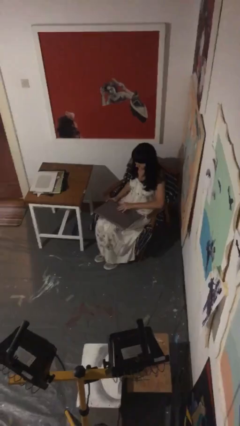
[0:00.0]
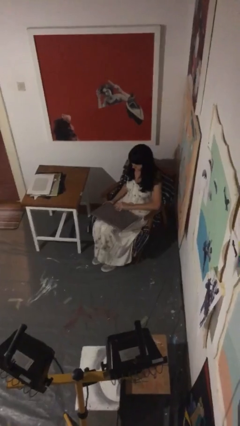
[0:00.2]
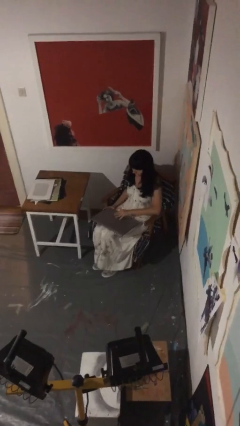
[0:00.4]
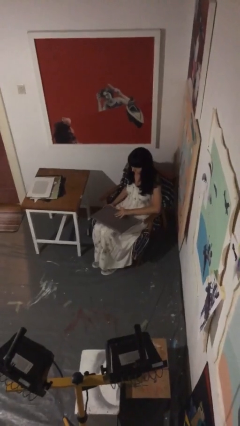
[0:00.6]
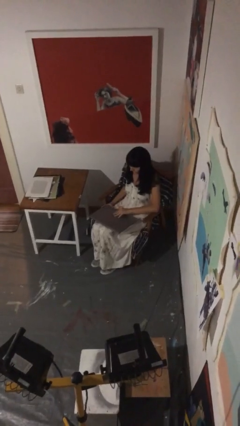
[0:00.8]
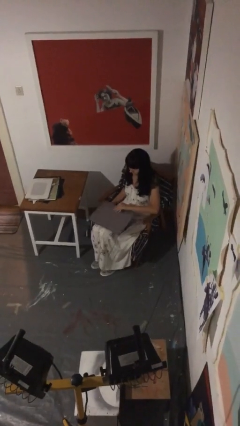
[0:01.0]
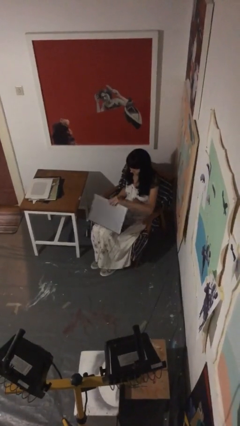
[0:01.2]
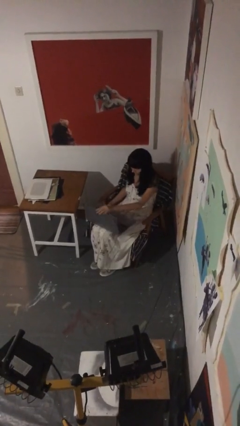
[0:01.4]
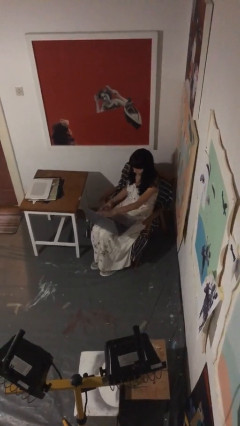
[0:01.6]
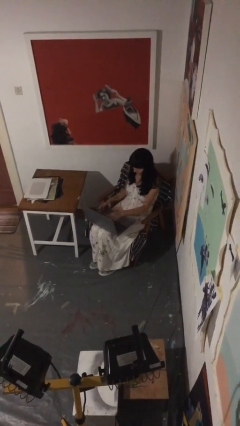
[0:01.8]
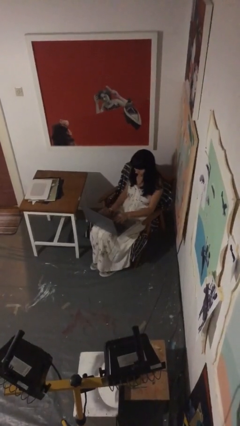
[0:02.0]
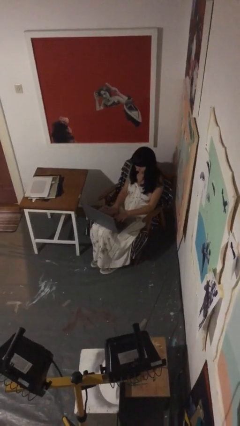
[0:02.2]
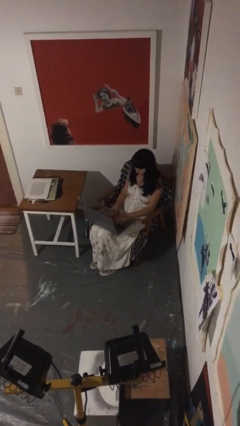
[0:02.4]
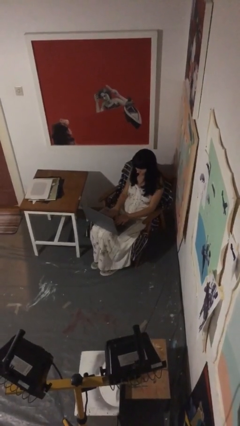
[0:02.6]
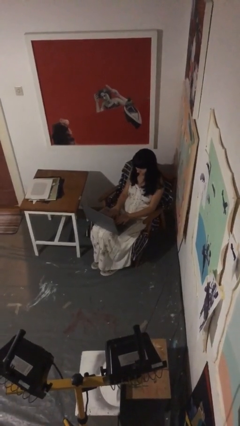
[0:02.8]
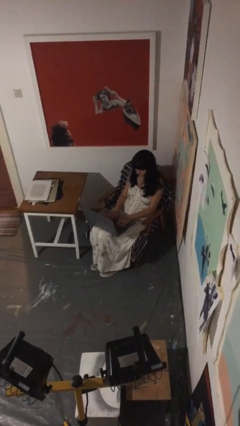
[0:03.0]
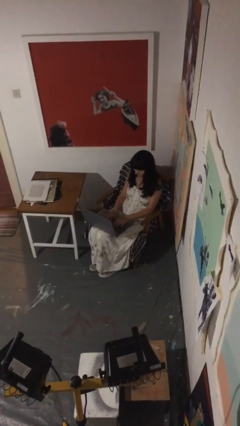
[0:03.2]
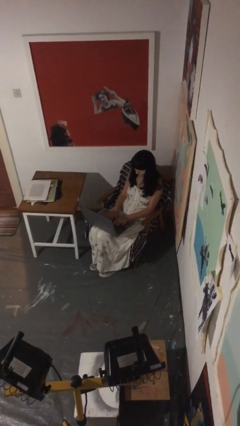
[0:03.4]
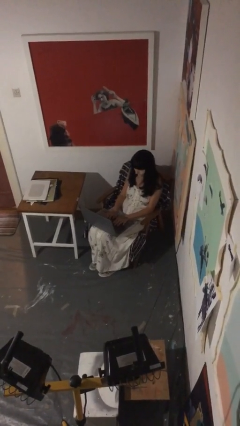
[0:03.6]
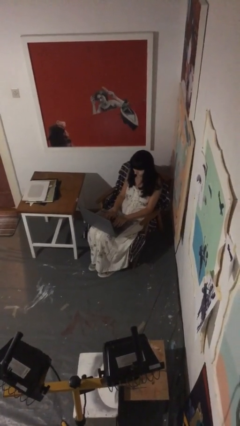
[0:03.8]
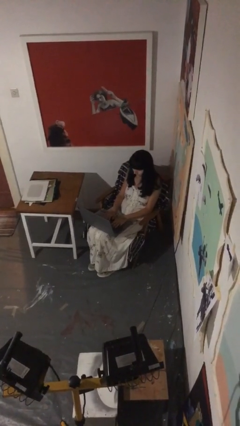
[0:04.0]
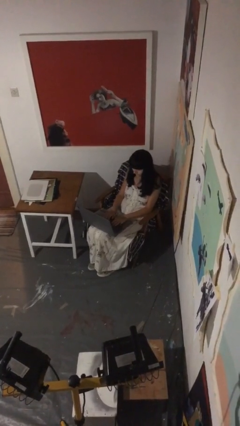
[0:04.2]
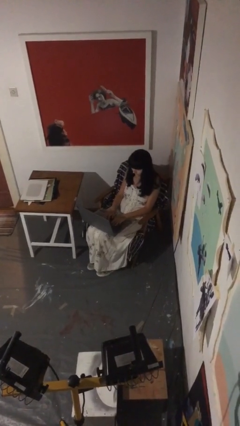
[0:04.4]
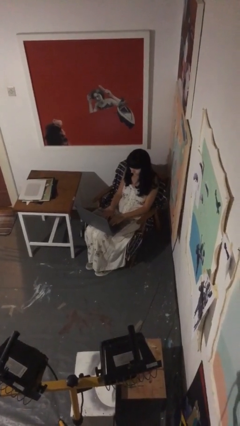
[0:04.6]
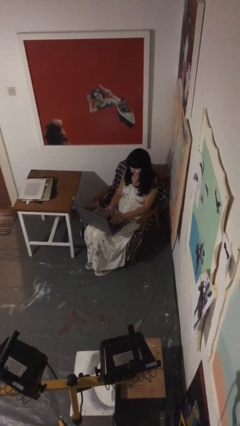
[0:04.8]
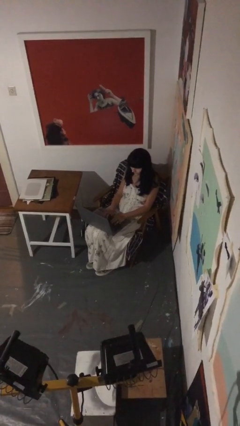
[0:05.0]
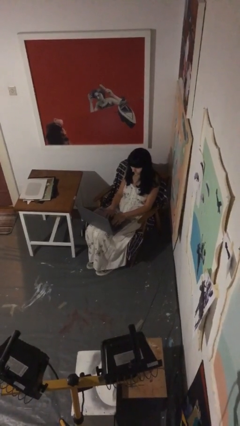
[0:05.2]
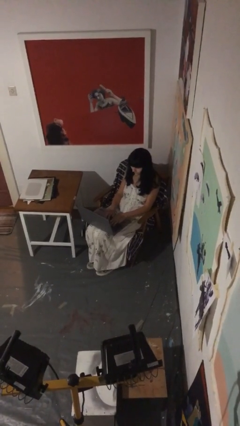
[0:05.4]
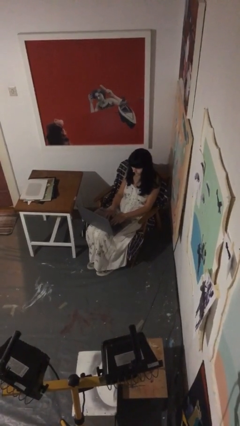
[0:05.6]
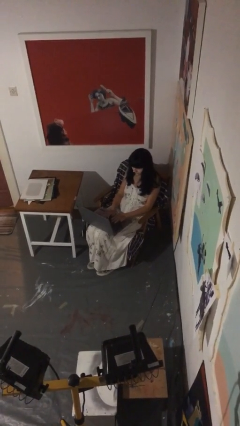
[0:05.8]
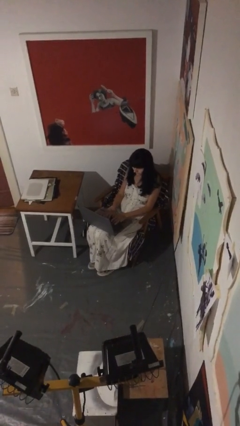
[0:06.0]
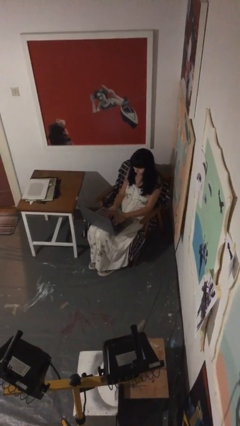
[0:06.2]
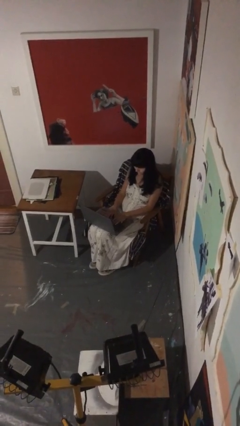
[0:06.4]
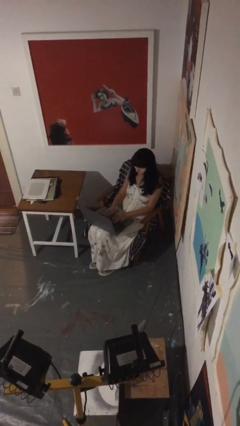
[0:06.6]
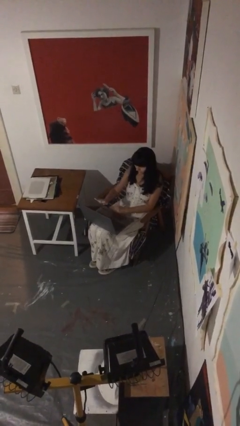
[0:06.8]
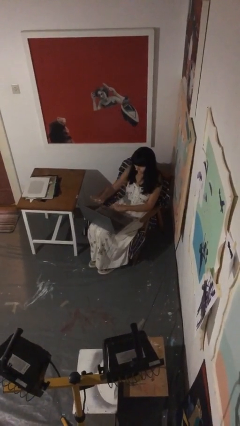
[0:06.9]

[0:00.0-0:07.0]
person interacts with laptop

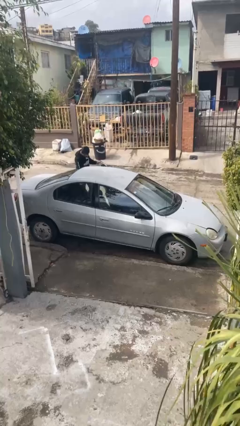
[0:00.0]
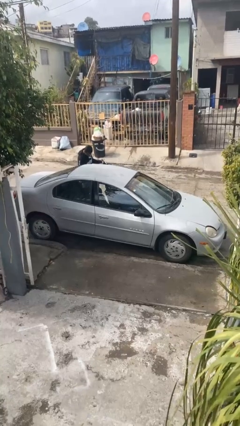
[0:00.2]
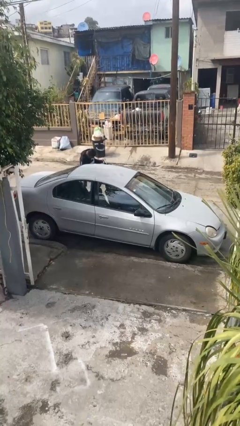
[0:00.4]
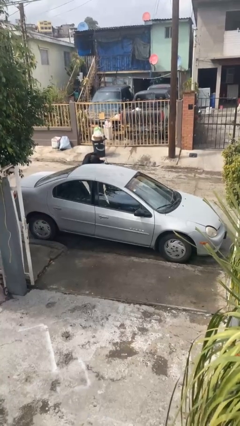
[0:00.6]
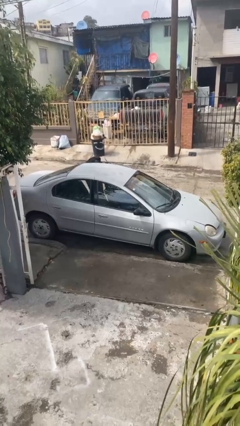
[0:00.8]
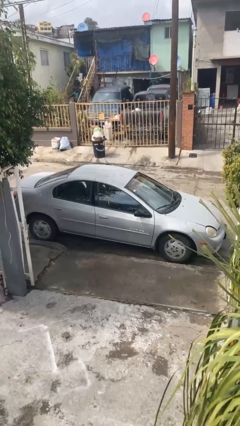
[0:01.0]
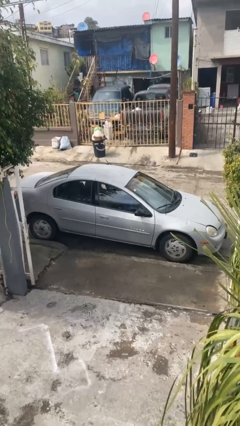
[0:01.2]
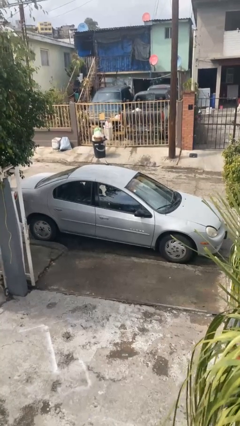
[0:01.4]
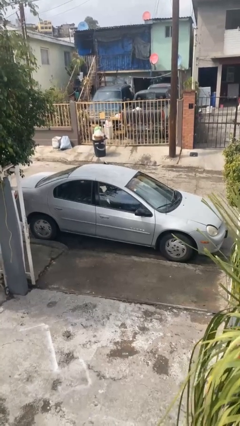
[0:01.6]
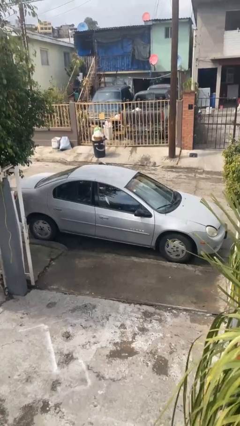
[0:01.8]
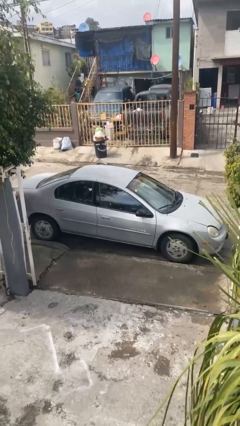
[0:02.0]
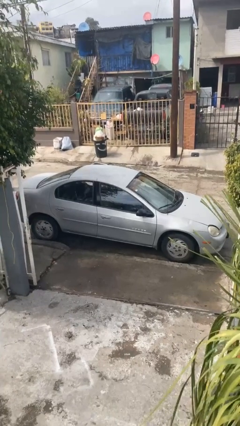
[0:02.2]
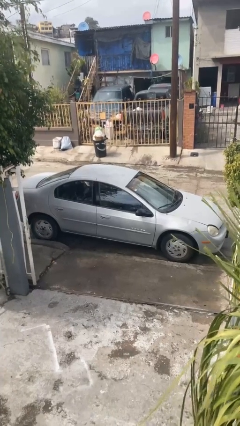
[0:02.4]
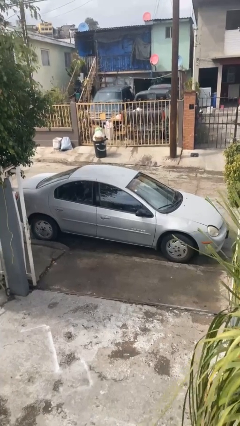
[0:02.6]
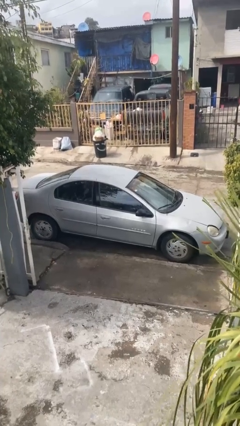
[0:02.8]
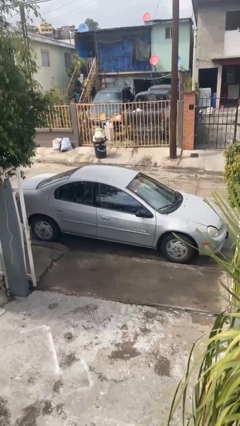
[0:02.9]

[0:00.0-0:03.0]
car picks up person

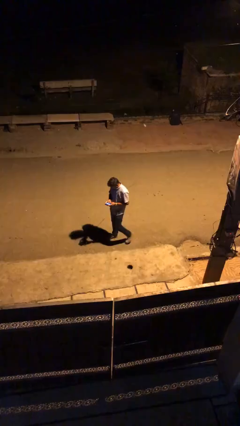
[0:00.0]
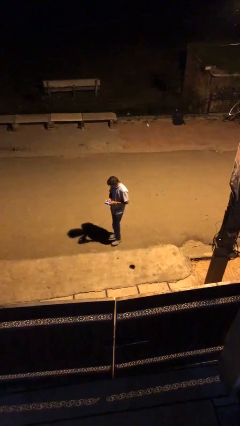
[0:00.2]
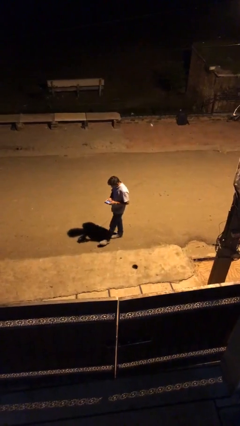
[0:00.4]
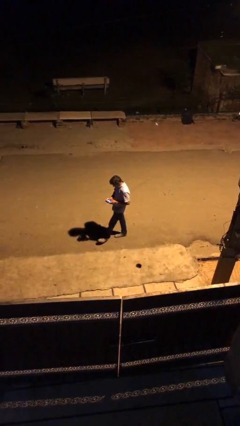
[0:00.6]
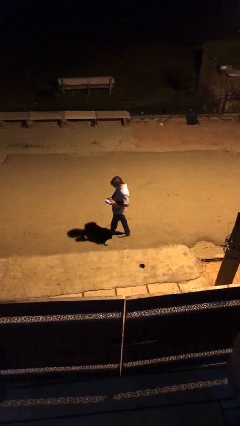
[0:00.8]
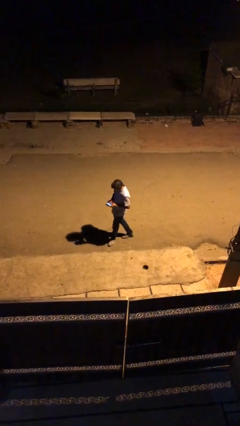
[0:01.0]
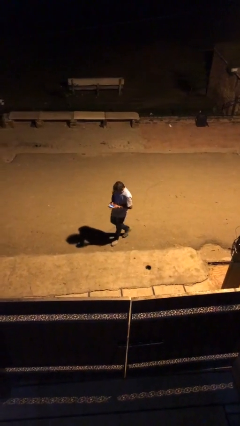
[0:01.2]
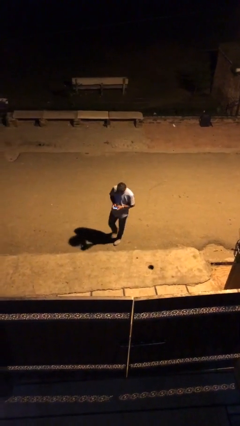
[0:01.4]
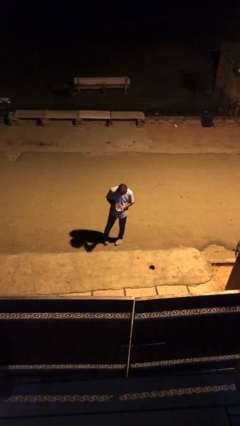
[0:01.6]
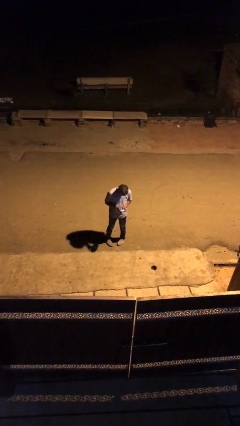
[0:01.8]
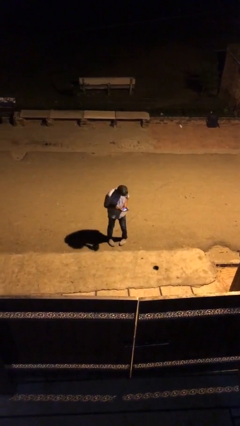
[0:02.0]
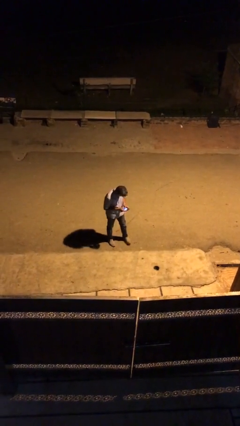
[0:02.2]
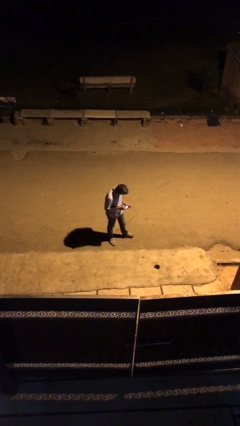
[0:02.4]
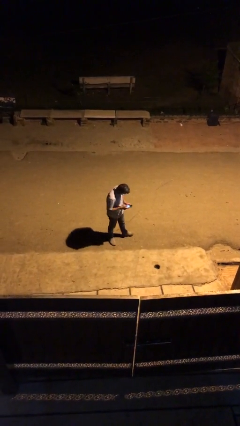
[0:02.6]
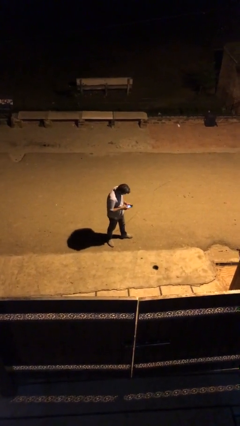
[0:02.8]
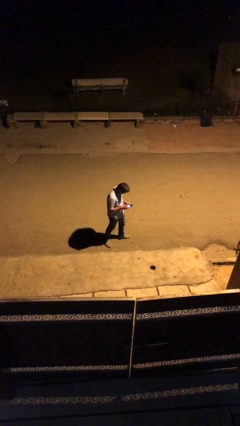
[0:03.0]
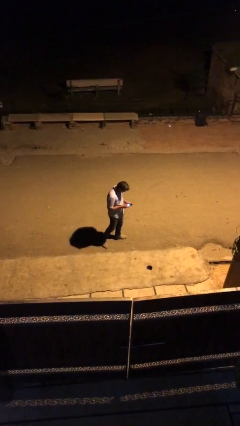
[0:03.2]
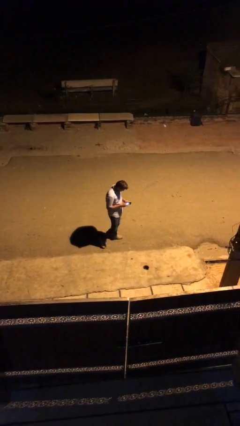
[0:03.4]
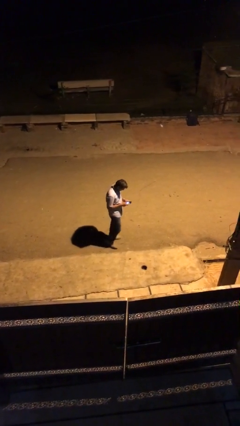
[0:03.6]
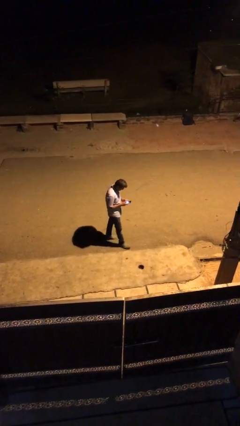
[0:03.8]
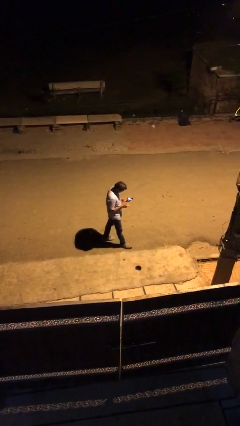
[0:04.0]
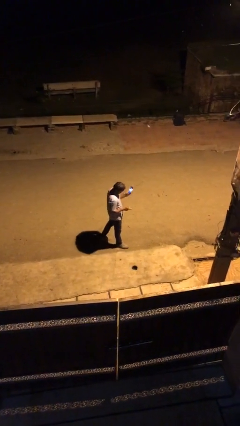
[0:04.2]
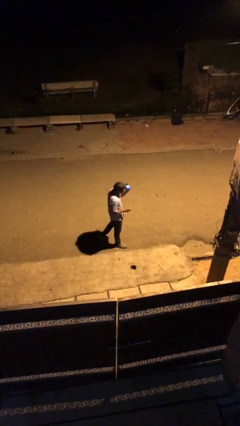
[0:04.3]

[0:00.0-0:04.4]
person texts on phone

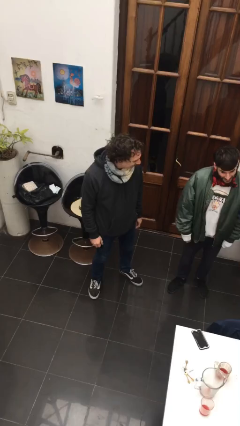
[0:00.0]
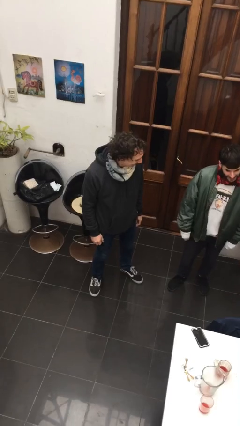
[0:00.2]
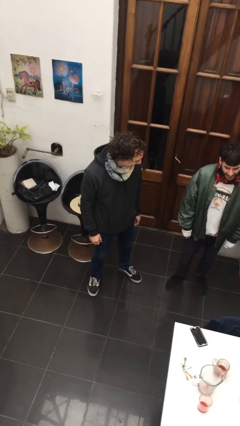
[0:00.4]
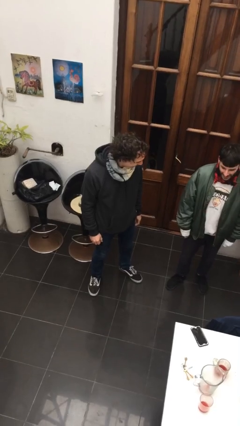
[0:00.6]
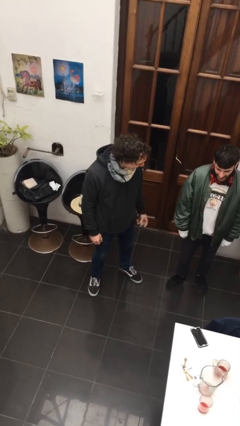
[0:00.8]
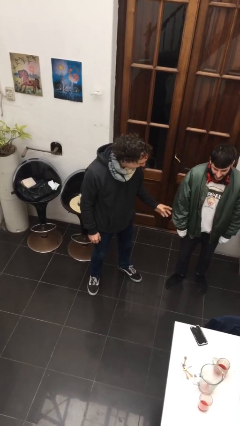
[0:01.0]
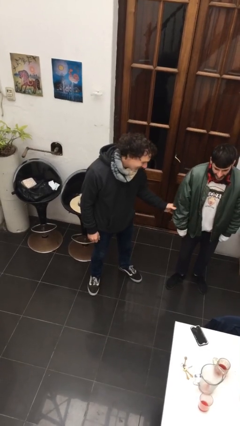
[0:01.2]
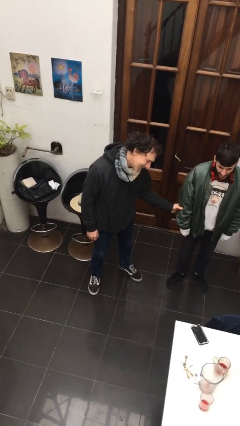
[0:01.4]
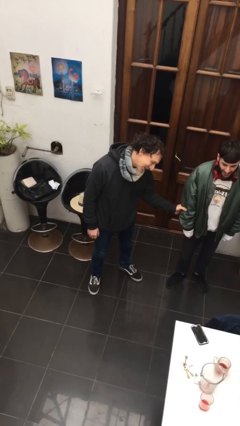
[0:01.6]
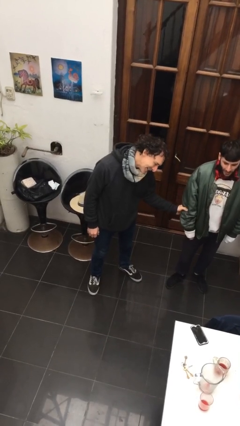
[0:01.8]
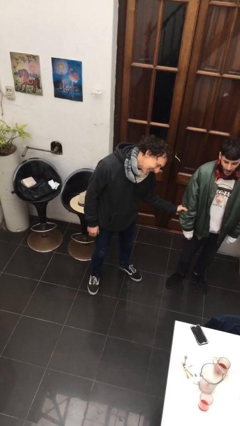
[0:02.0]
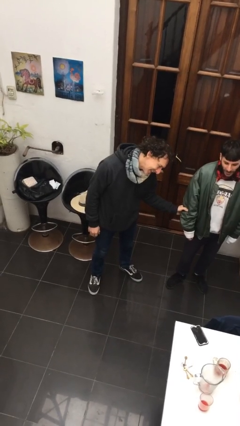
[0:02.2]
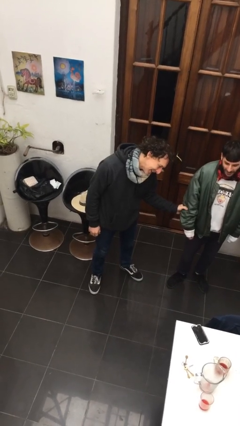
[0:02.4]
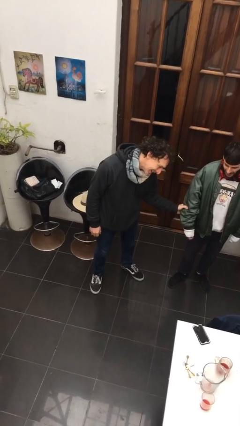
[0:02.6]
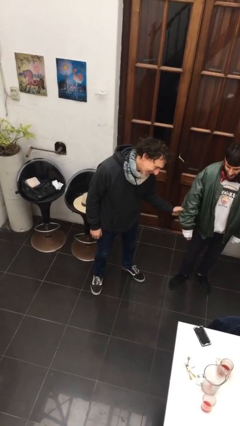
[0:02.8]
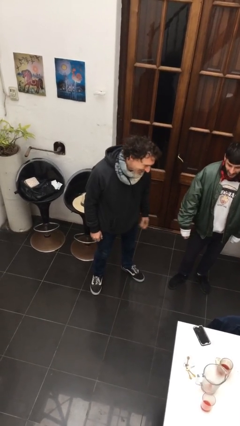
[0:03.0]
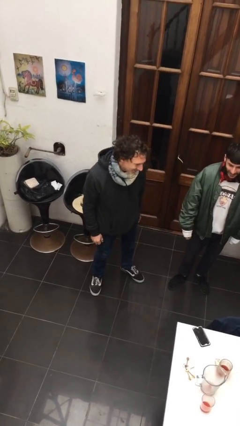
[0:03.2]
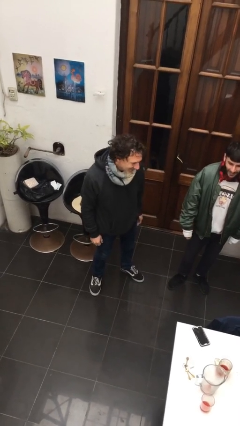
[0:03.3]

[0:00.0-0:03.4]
person grabs person by forearm

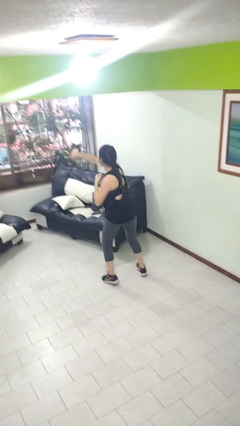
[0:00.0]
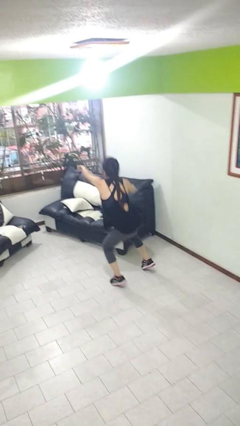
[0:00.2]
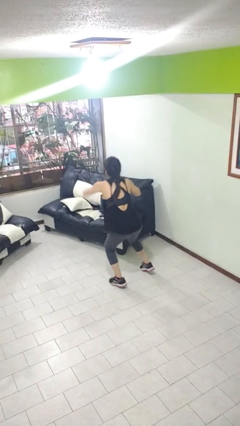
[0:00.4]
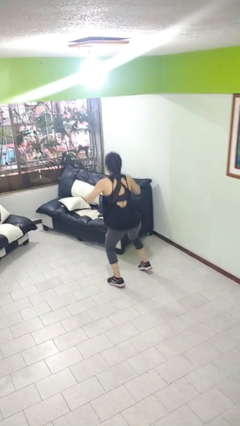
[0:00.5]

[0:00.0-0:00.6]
person punches
